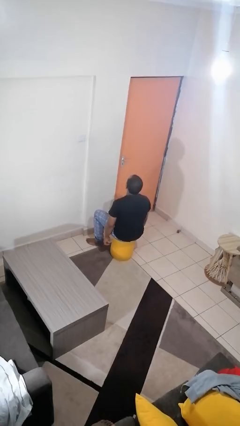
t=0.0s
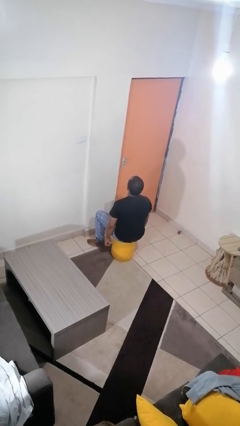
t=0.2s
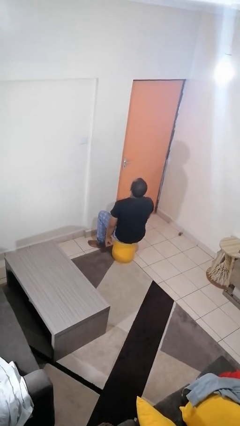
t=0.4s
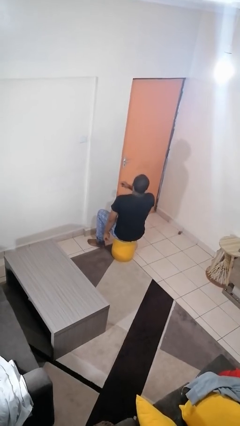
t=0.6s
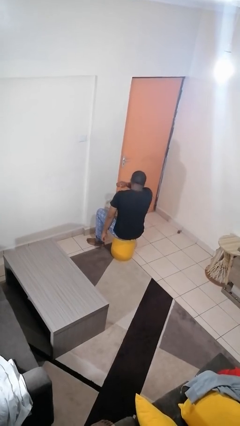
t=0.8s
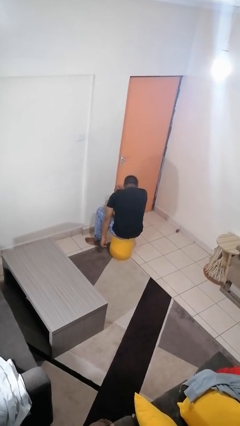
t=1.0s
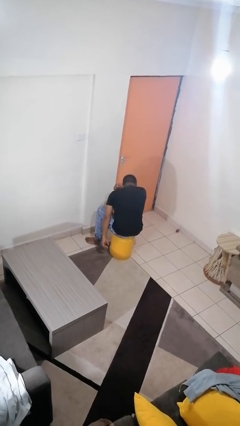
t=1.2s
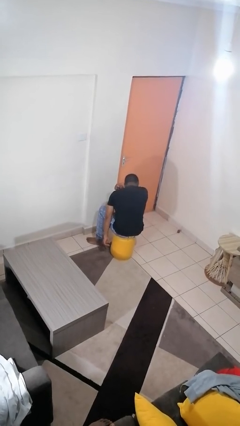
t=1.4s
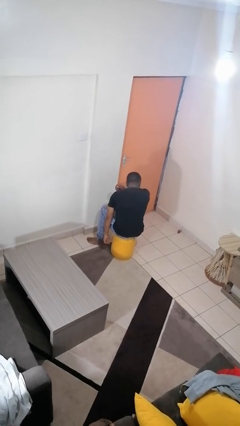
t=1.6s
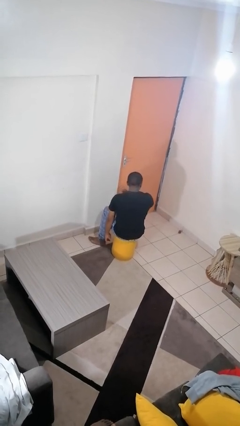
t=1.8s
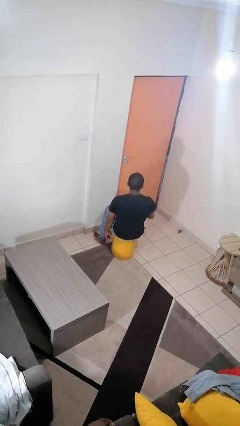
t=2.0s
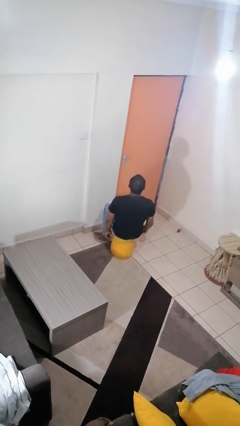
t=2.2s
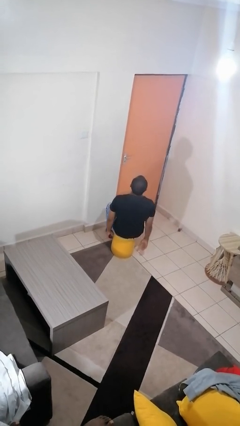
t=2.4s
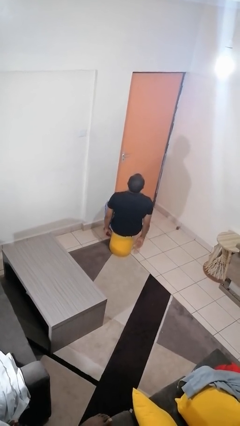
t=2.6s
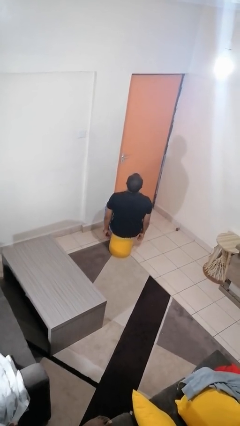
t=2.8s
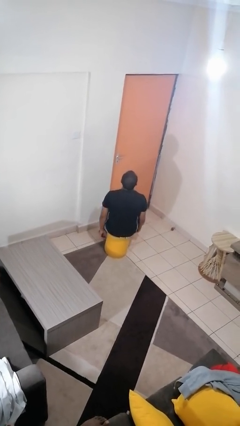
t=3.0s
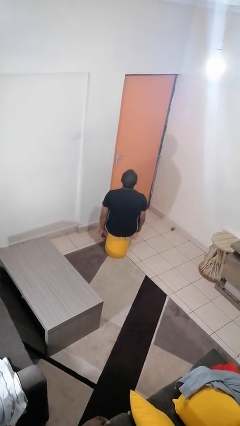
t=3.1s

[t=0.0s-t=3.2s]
person sneezes into arm

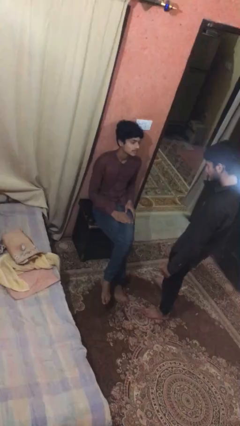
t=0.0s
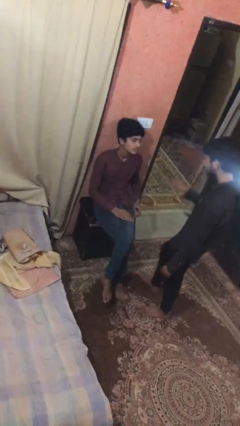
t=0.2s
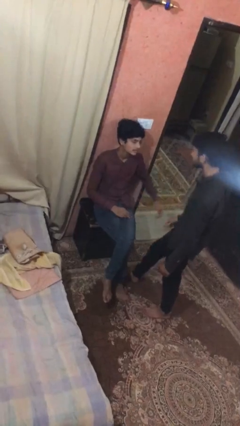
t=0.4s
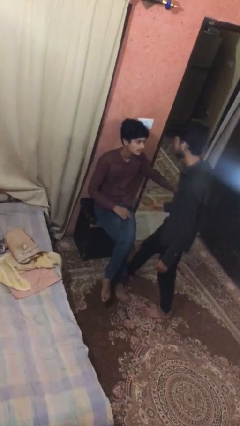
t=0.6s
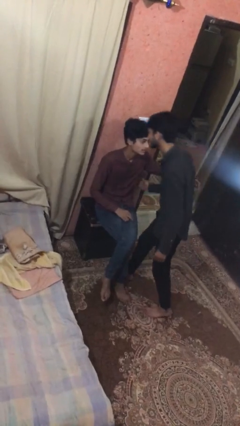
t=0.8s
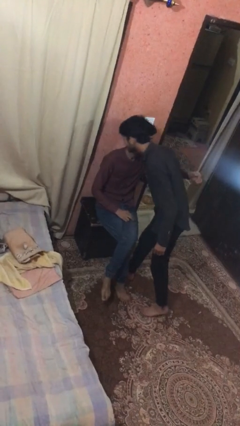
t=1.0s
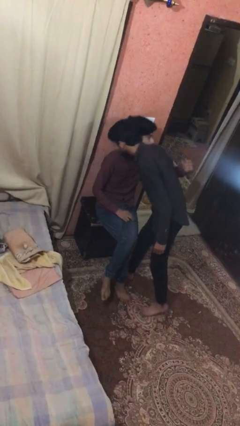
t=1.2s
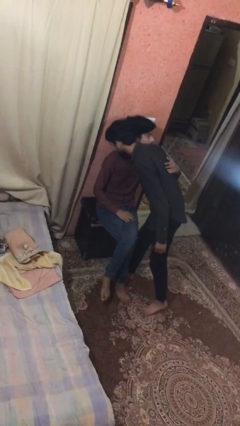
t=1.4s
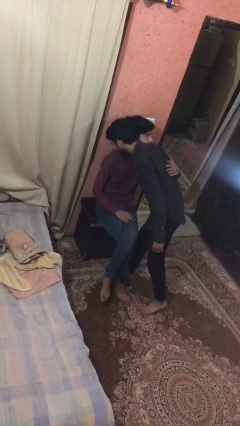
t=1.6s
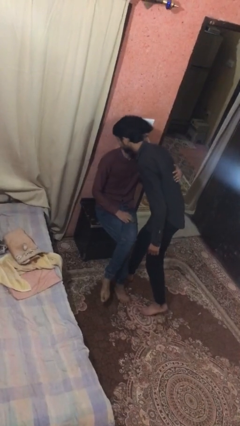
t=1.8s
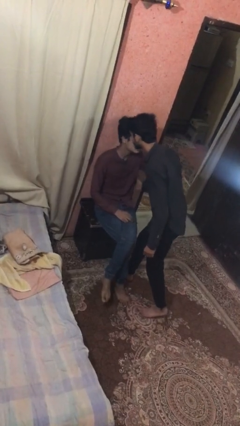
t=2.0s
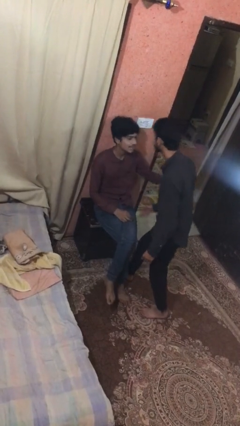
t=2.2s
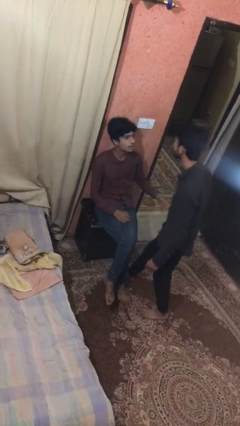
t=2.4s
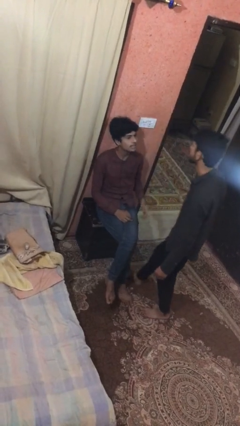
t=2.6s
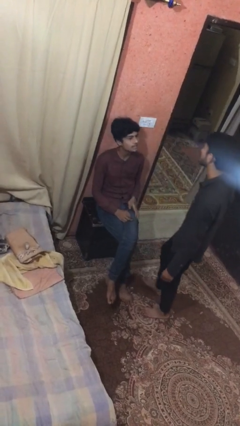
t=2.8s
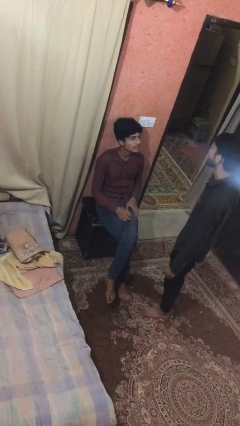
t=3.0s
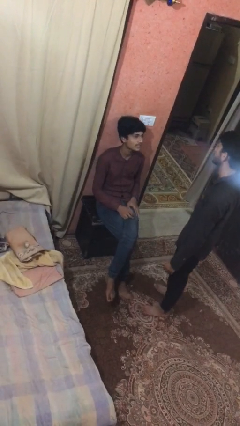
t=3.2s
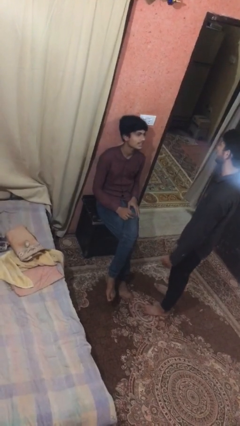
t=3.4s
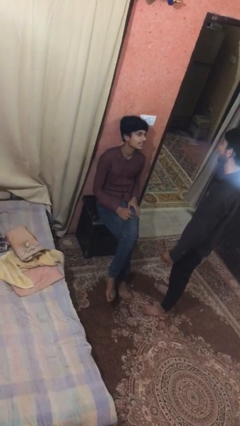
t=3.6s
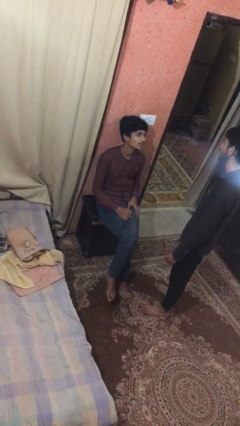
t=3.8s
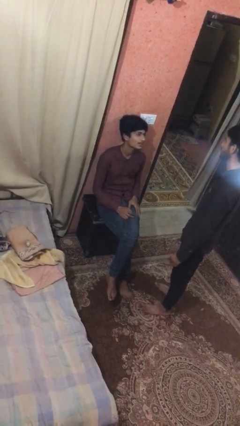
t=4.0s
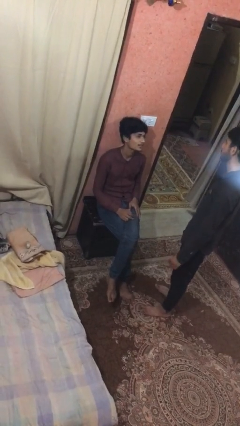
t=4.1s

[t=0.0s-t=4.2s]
person embraces person

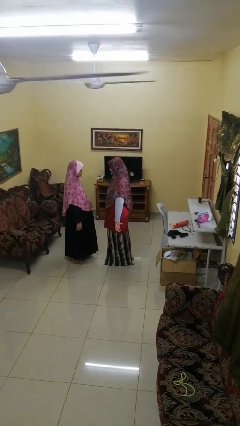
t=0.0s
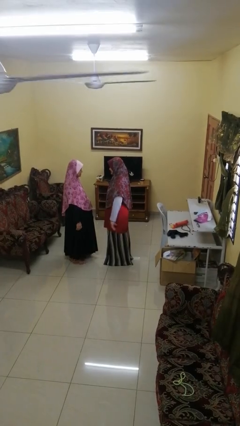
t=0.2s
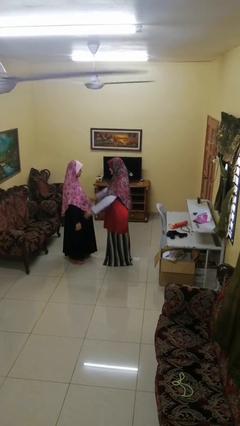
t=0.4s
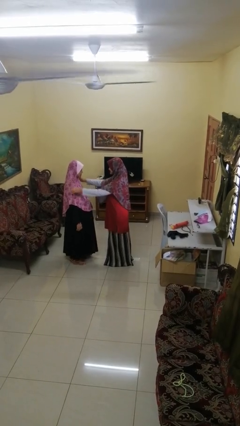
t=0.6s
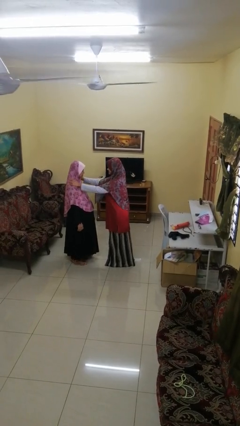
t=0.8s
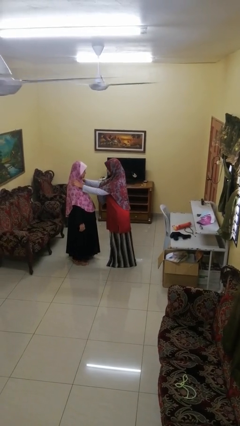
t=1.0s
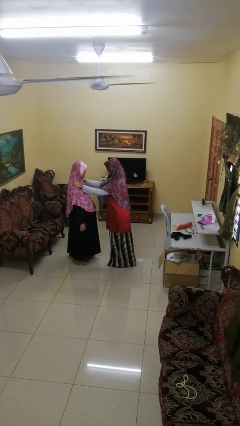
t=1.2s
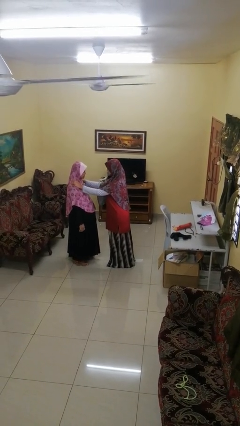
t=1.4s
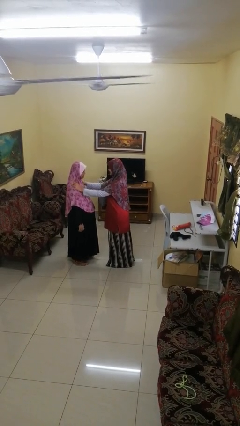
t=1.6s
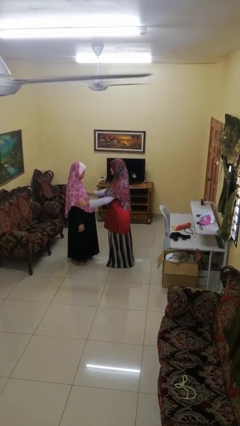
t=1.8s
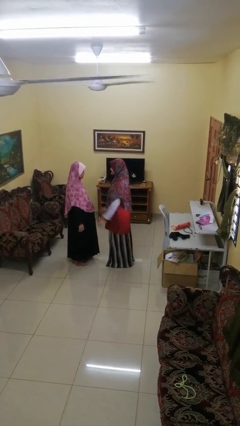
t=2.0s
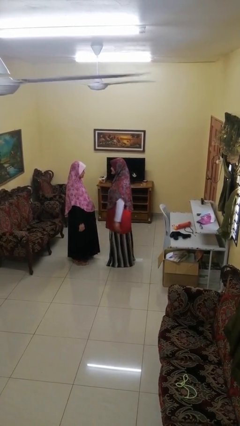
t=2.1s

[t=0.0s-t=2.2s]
person pounds shoulders of person

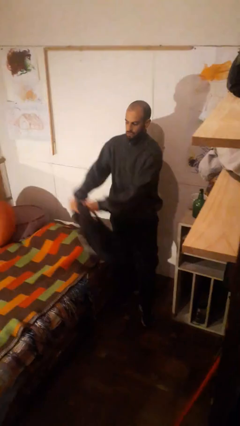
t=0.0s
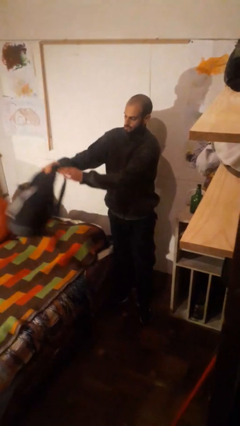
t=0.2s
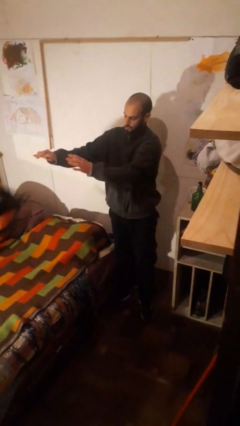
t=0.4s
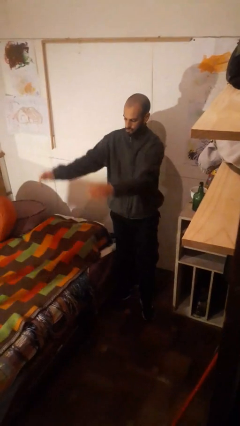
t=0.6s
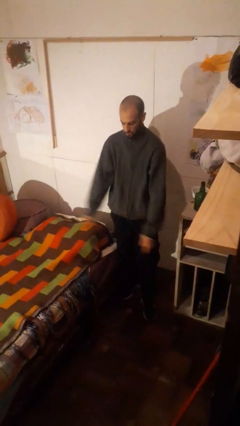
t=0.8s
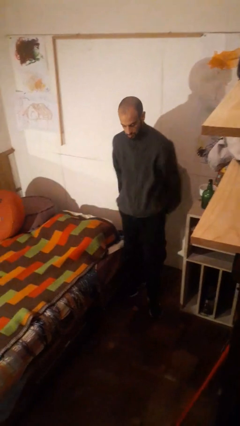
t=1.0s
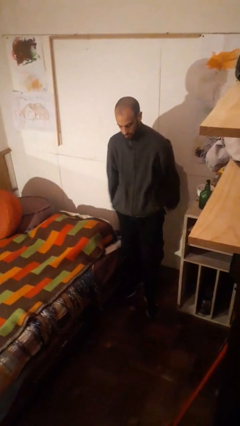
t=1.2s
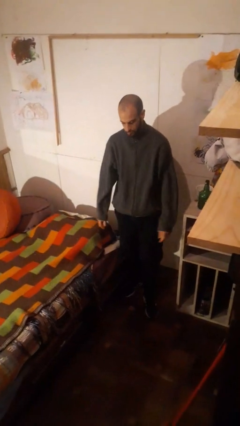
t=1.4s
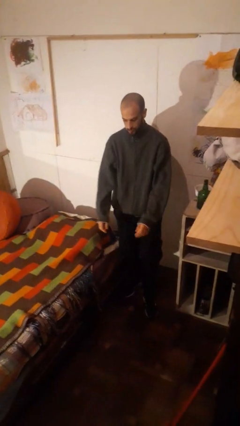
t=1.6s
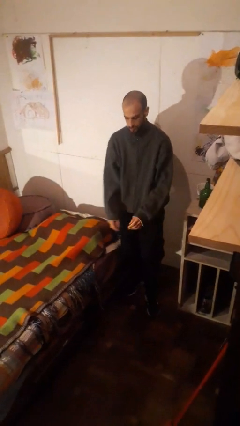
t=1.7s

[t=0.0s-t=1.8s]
person throws object on bed

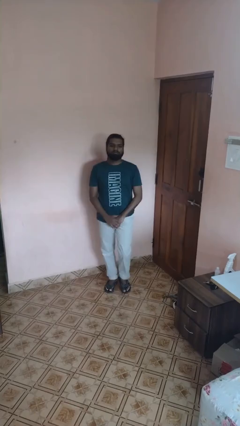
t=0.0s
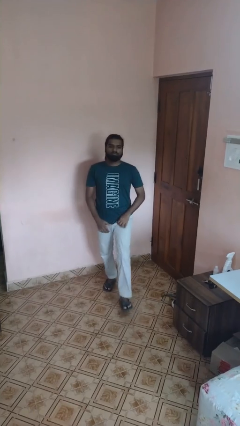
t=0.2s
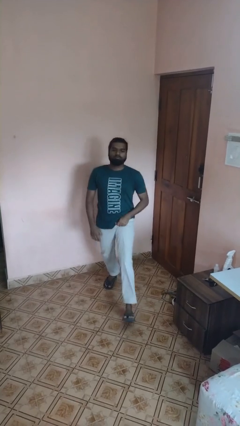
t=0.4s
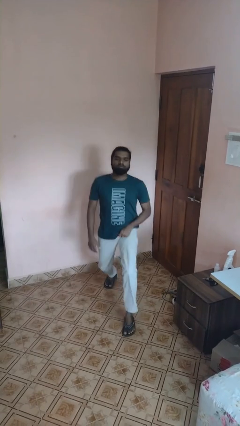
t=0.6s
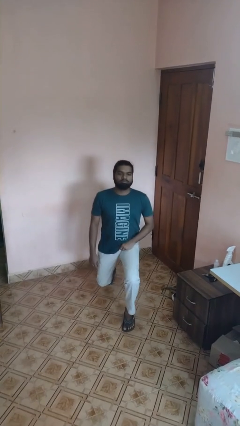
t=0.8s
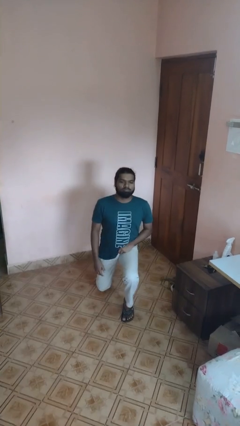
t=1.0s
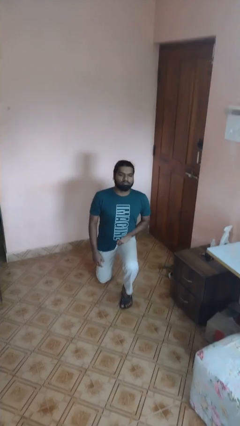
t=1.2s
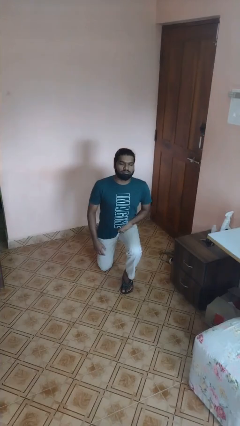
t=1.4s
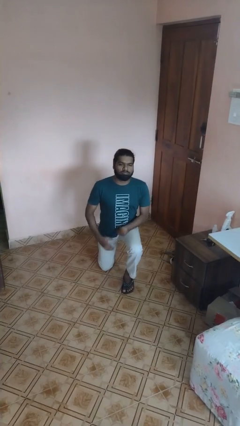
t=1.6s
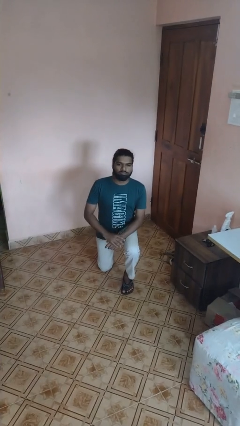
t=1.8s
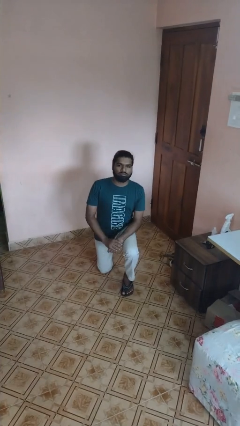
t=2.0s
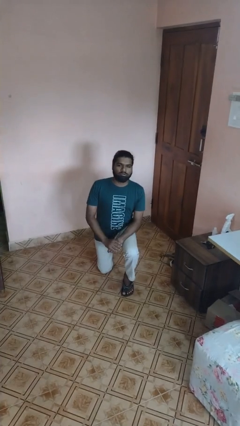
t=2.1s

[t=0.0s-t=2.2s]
person kneels

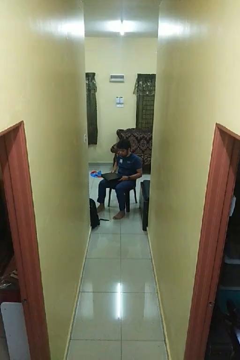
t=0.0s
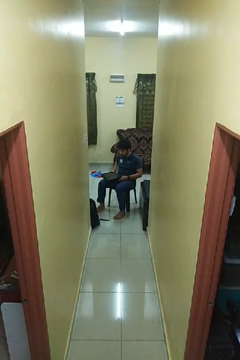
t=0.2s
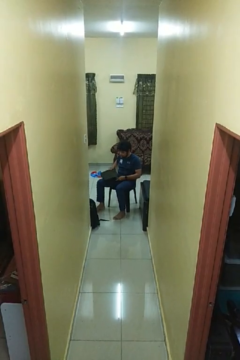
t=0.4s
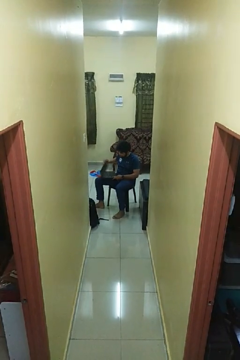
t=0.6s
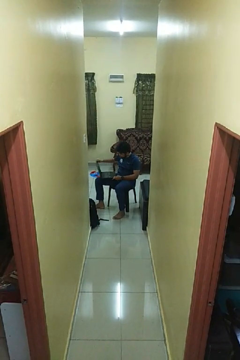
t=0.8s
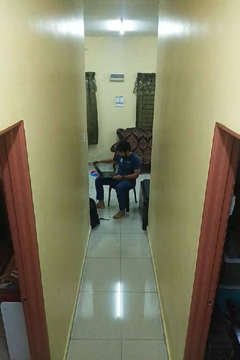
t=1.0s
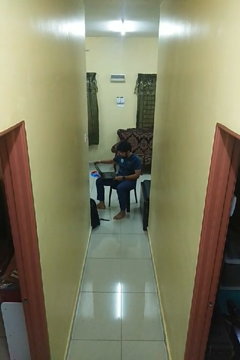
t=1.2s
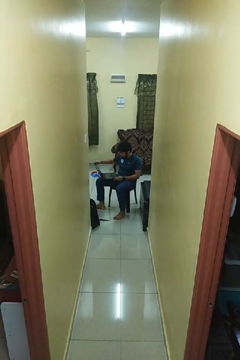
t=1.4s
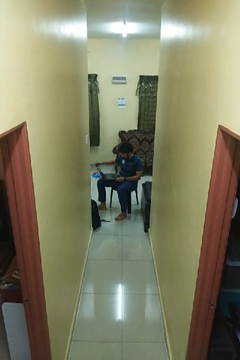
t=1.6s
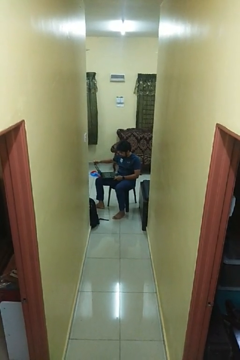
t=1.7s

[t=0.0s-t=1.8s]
person opens laptop

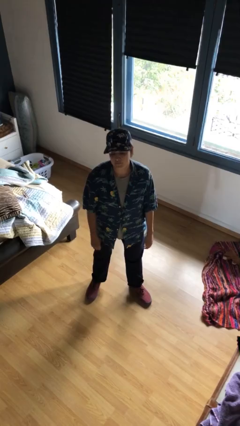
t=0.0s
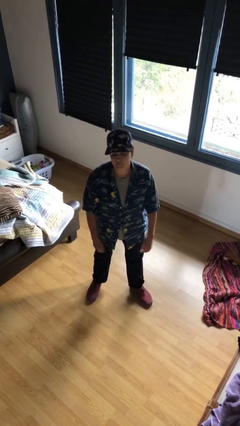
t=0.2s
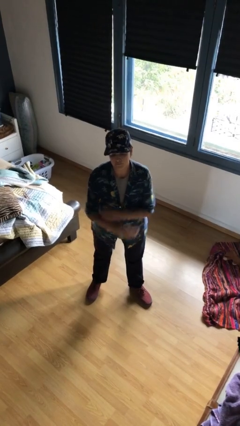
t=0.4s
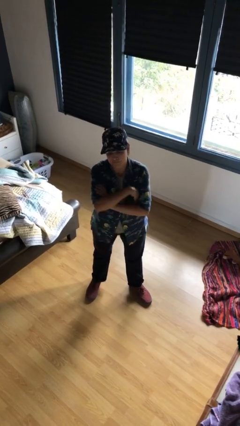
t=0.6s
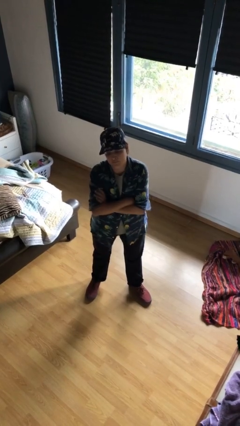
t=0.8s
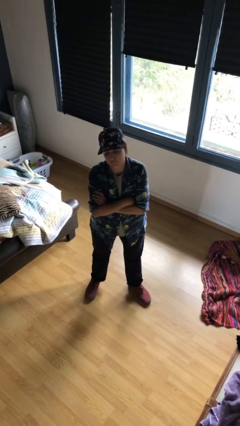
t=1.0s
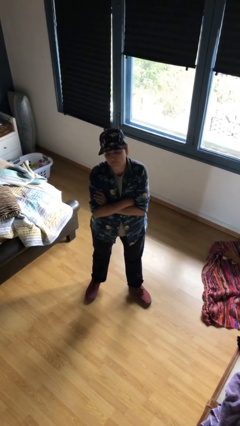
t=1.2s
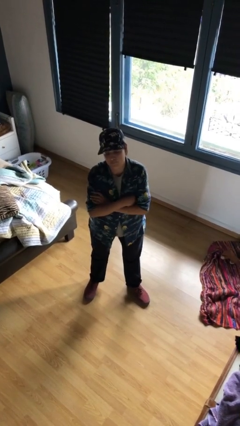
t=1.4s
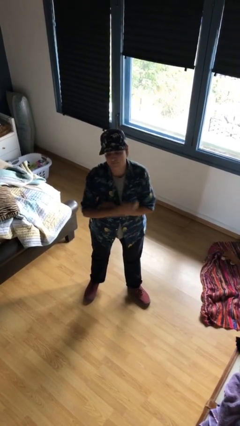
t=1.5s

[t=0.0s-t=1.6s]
person crosses arms

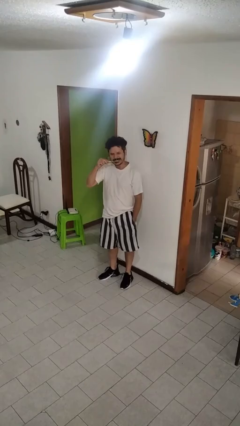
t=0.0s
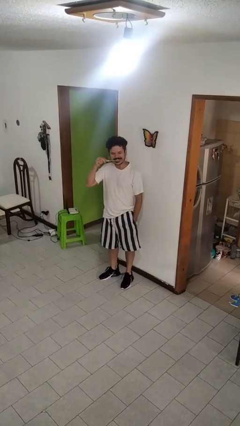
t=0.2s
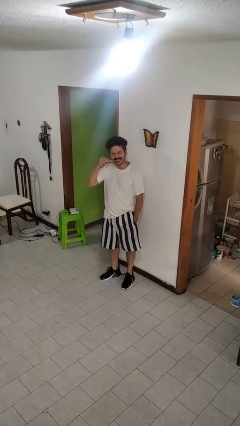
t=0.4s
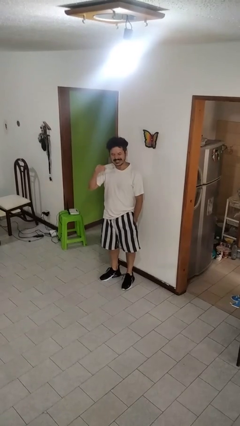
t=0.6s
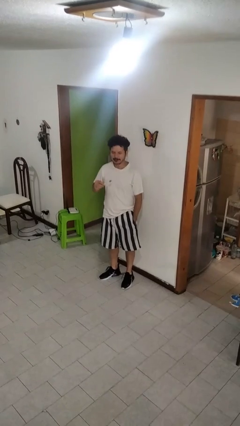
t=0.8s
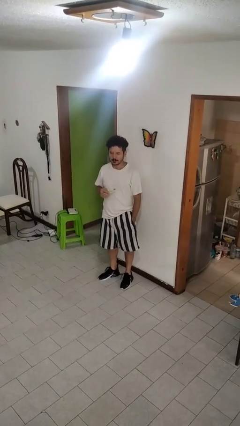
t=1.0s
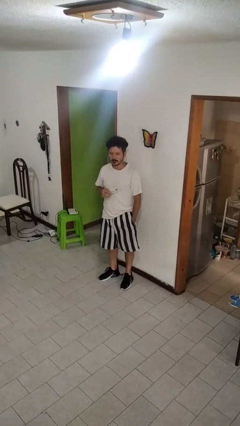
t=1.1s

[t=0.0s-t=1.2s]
person brushes teeth
